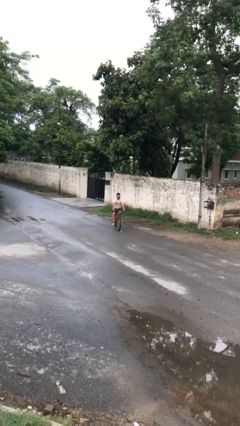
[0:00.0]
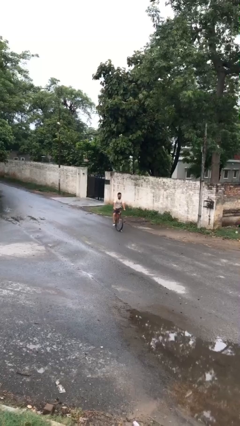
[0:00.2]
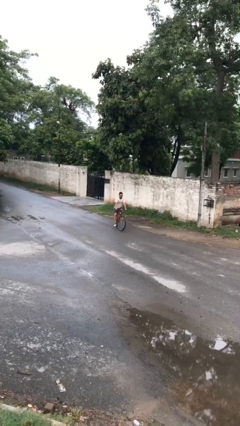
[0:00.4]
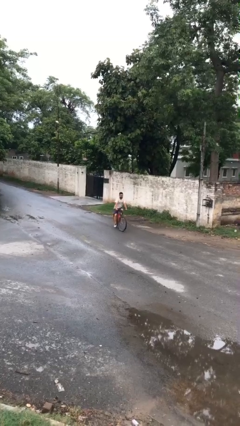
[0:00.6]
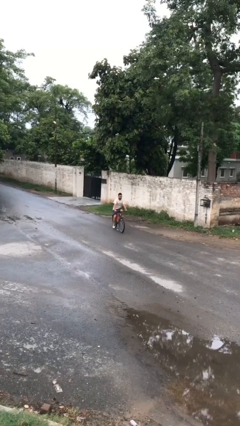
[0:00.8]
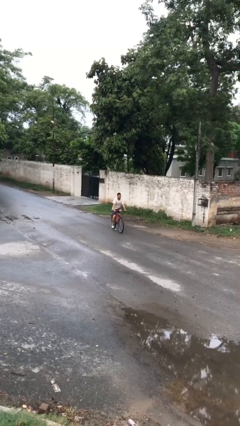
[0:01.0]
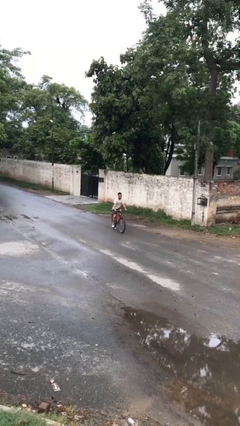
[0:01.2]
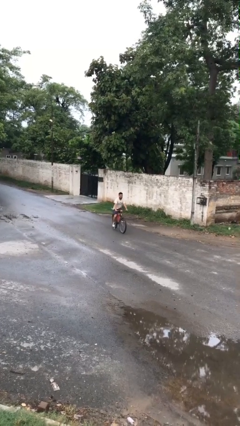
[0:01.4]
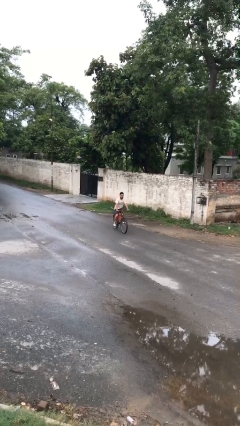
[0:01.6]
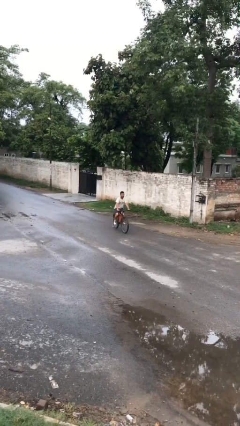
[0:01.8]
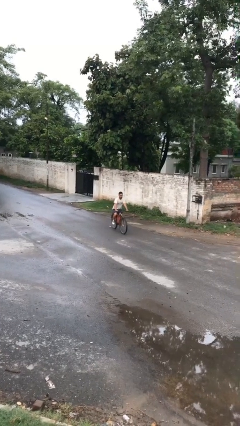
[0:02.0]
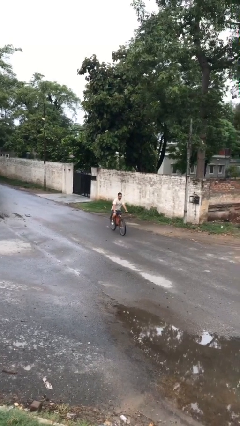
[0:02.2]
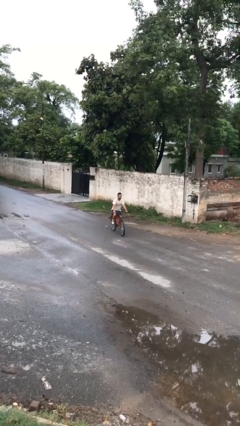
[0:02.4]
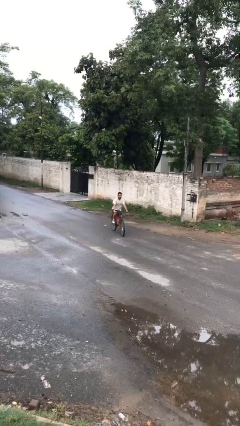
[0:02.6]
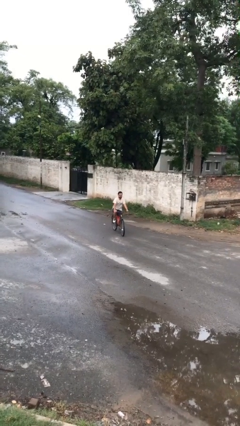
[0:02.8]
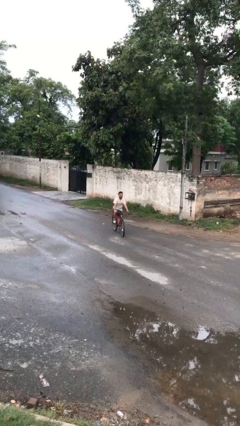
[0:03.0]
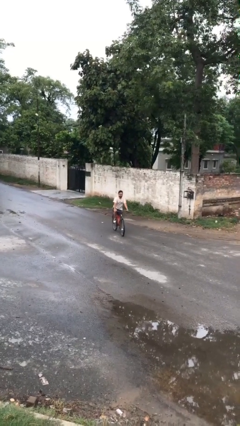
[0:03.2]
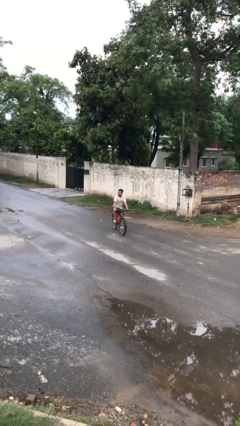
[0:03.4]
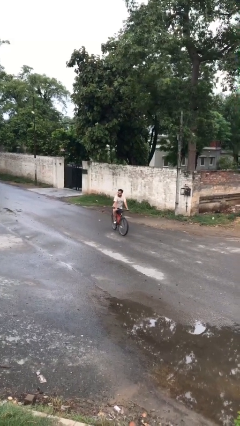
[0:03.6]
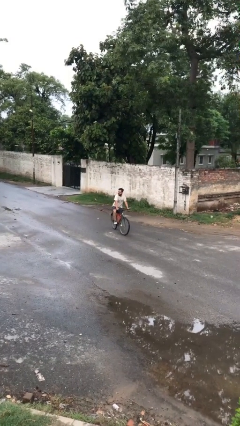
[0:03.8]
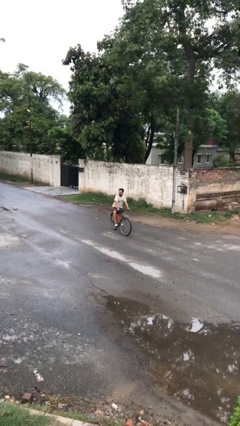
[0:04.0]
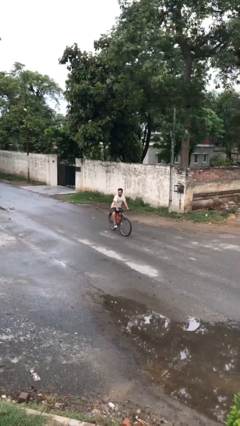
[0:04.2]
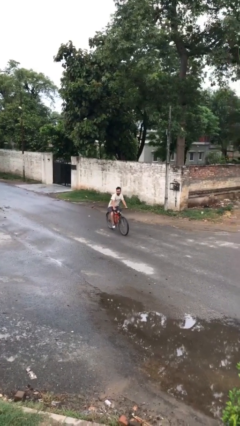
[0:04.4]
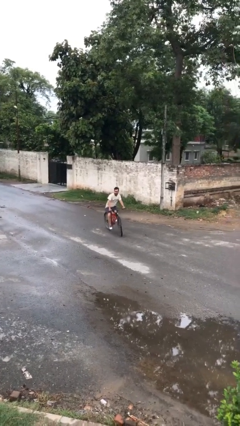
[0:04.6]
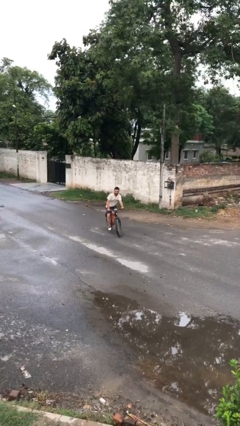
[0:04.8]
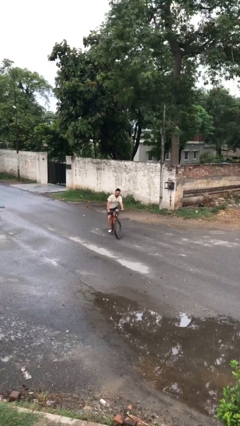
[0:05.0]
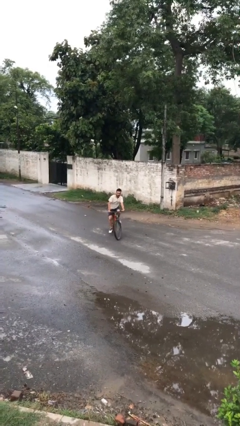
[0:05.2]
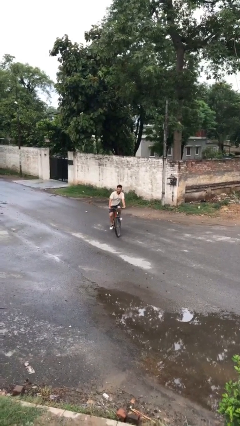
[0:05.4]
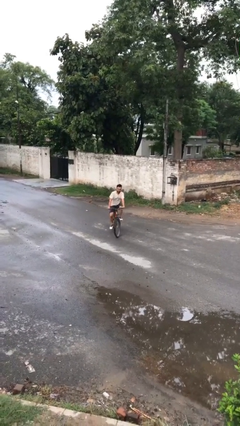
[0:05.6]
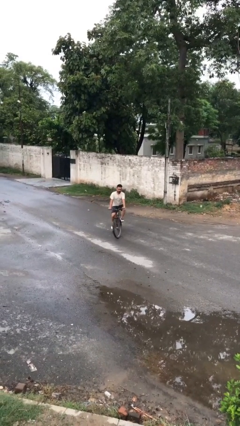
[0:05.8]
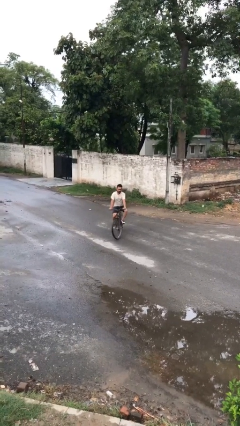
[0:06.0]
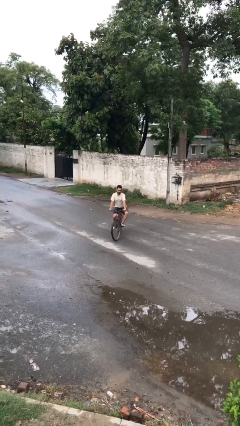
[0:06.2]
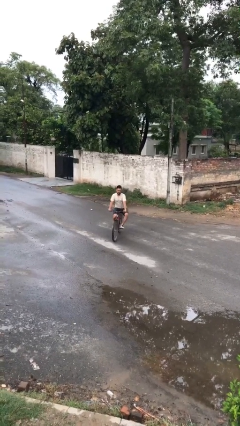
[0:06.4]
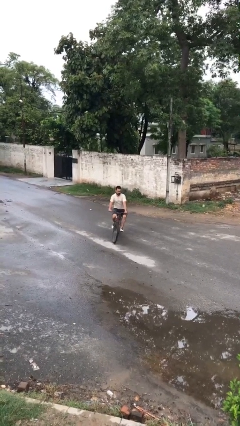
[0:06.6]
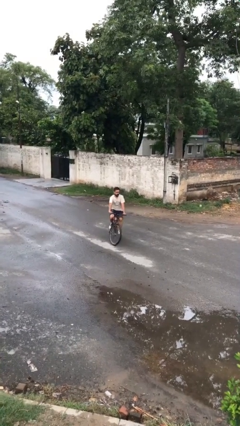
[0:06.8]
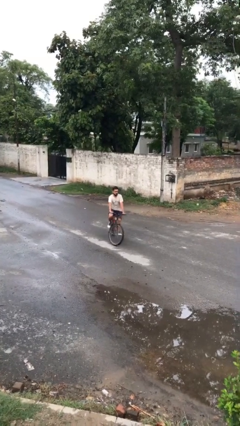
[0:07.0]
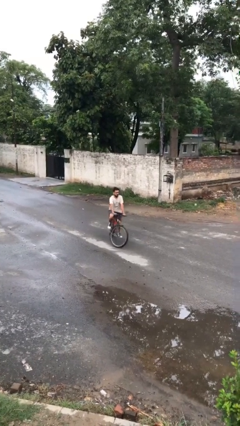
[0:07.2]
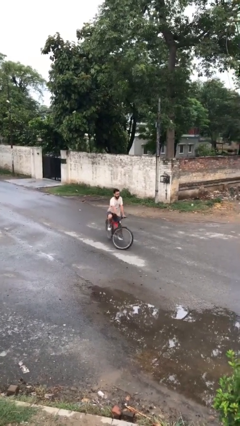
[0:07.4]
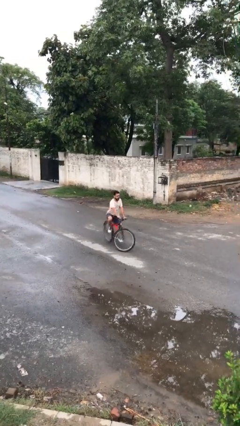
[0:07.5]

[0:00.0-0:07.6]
person rides bicycle

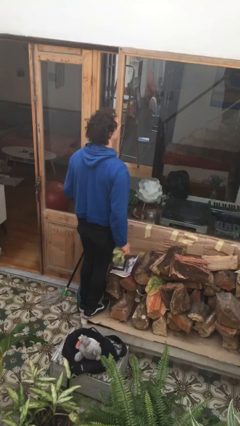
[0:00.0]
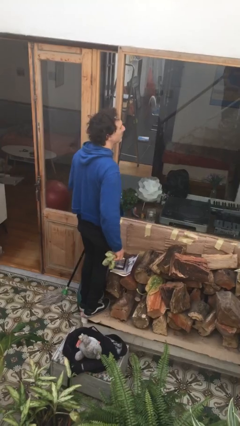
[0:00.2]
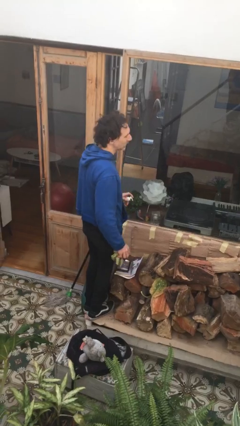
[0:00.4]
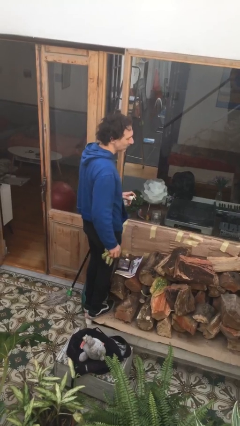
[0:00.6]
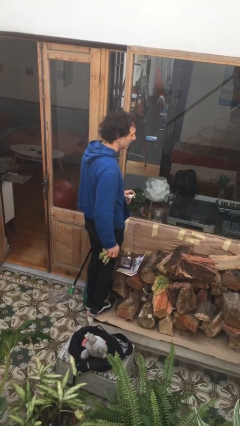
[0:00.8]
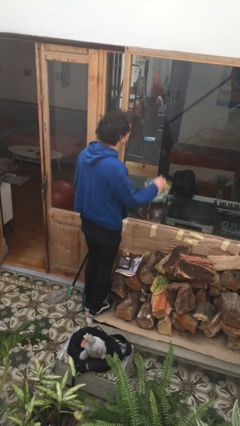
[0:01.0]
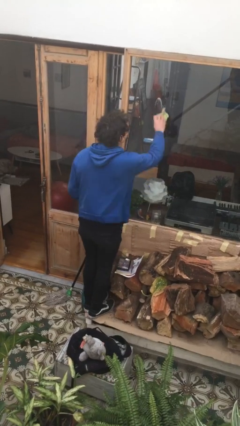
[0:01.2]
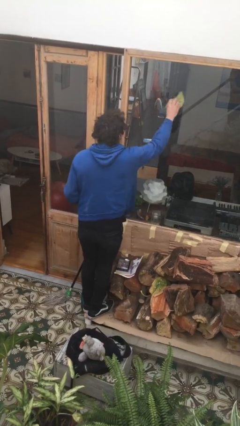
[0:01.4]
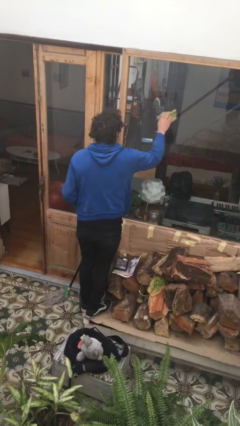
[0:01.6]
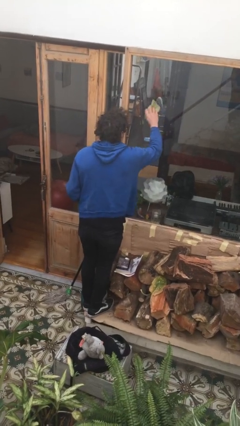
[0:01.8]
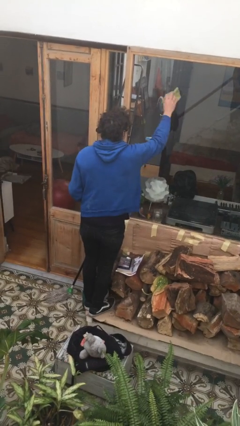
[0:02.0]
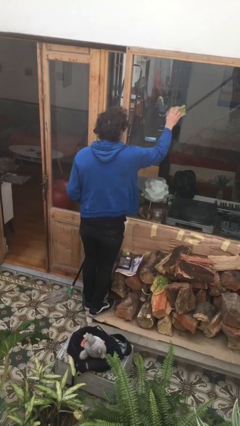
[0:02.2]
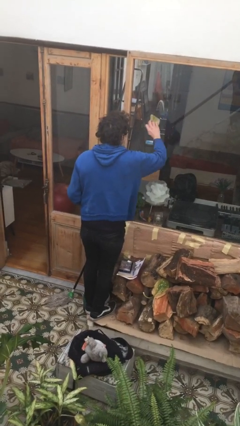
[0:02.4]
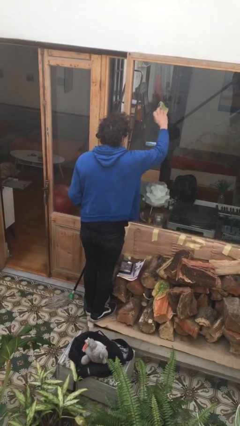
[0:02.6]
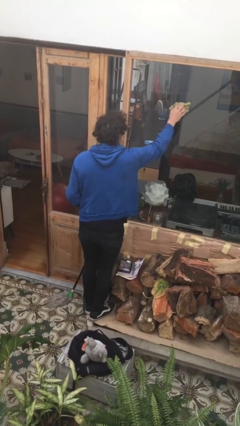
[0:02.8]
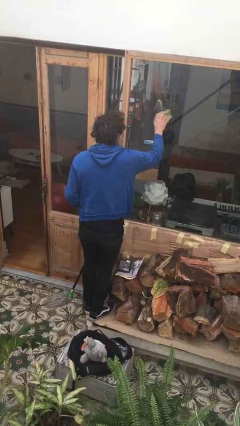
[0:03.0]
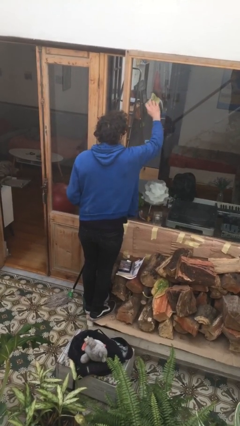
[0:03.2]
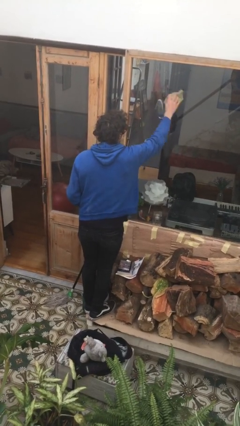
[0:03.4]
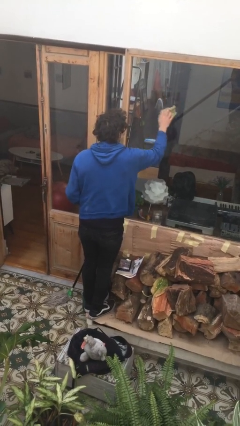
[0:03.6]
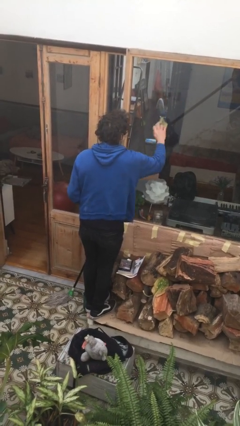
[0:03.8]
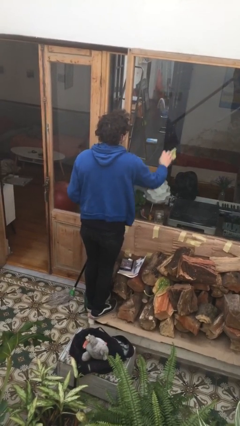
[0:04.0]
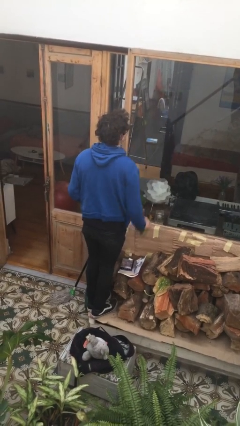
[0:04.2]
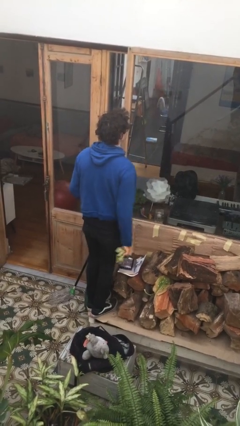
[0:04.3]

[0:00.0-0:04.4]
person washes window

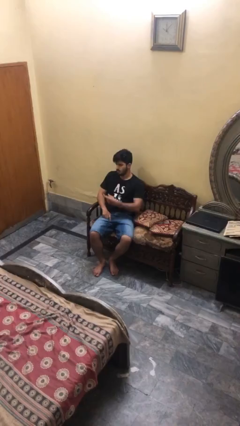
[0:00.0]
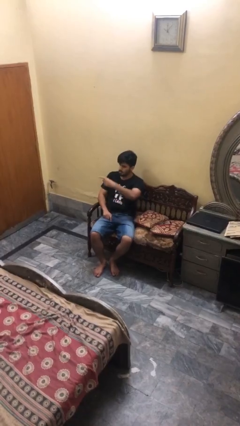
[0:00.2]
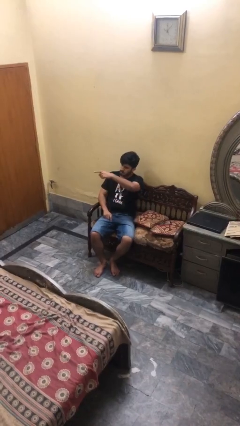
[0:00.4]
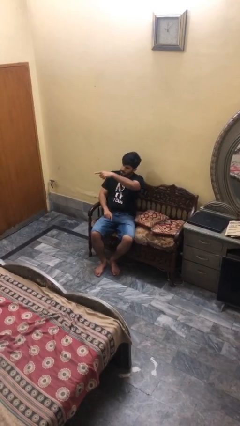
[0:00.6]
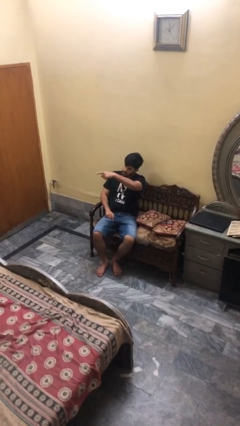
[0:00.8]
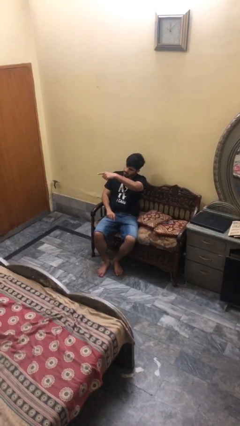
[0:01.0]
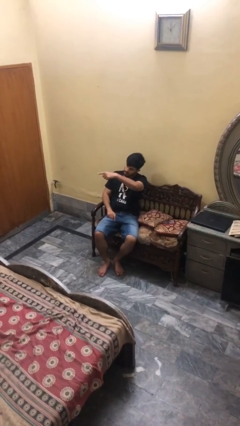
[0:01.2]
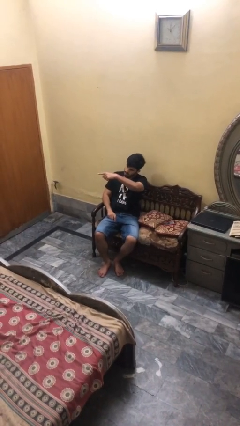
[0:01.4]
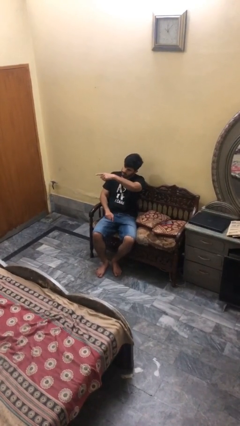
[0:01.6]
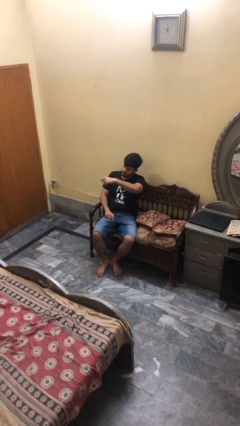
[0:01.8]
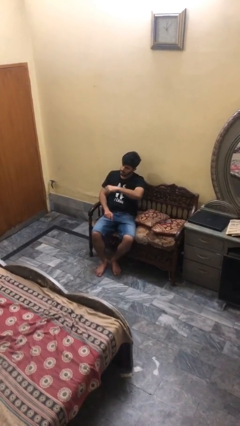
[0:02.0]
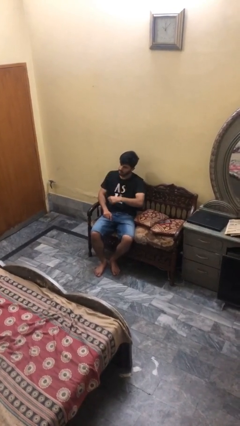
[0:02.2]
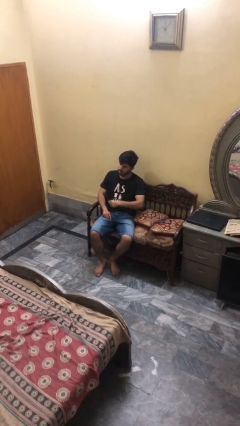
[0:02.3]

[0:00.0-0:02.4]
person points at person

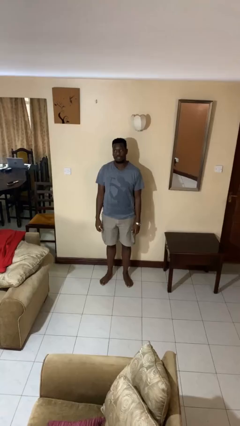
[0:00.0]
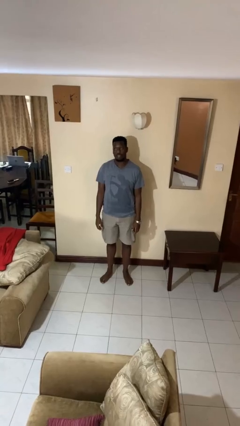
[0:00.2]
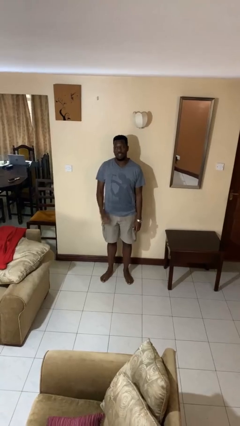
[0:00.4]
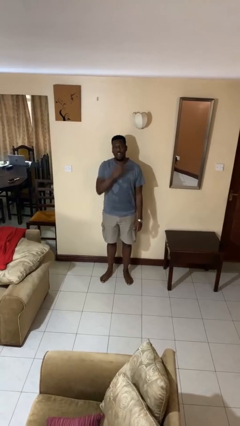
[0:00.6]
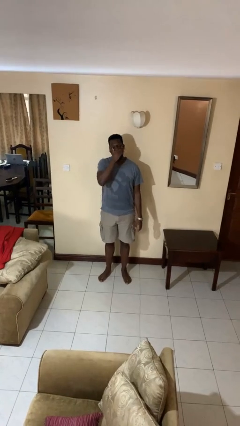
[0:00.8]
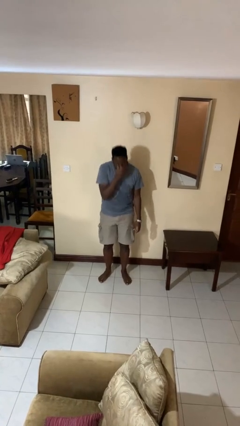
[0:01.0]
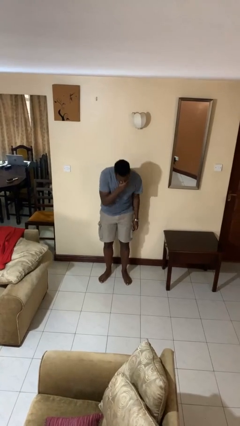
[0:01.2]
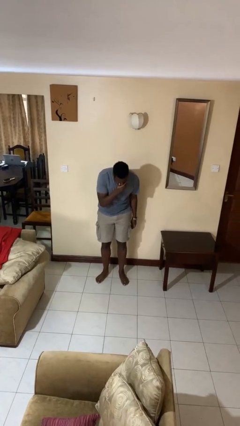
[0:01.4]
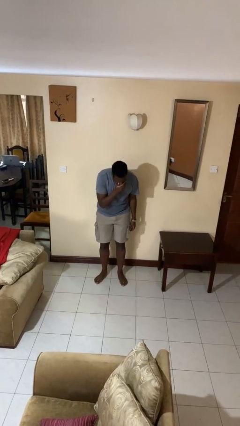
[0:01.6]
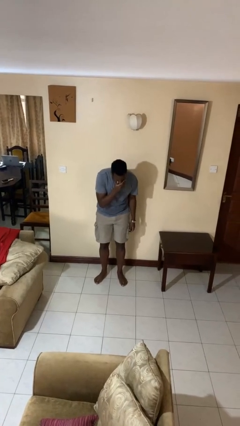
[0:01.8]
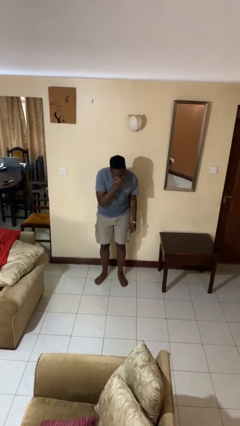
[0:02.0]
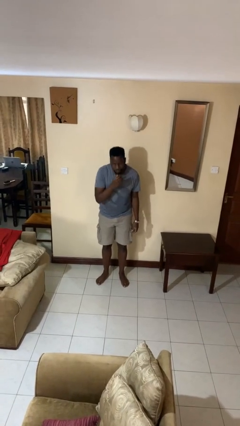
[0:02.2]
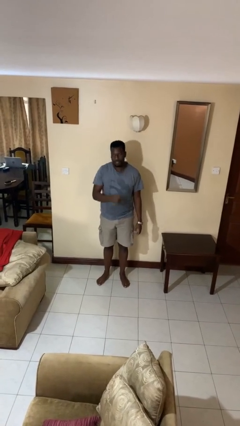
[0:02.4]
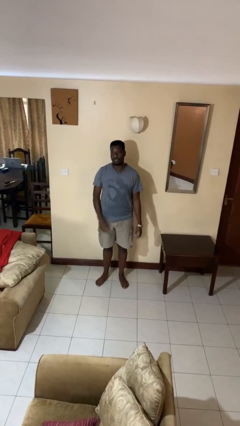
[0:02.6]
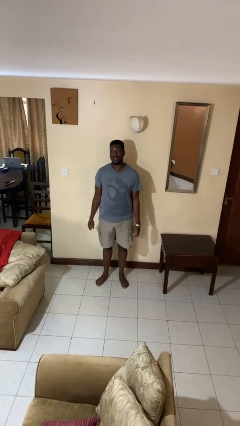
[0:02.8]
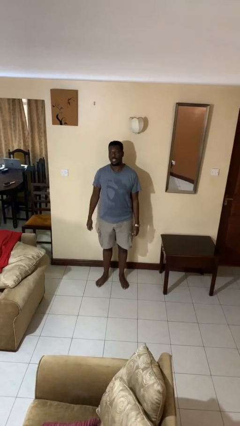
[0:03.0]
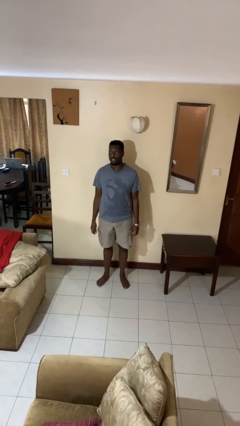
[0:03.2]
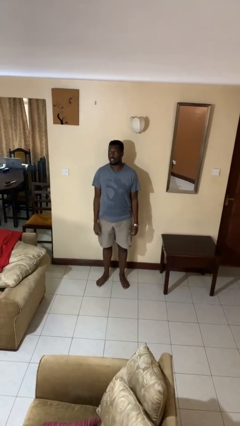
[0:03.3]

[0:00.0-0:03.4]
person sneezes into hand
